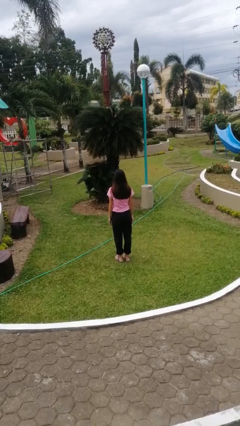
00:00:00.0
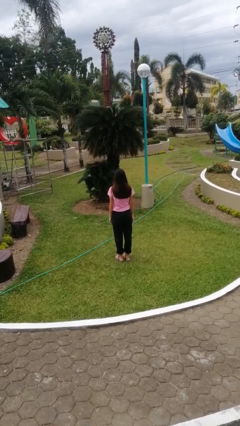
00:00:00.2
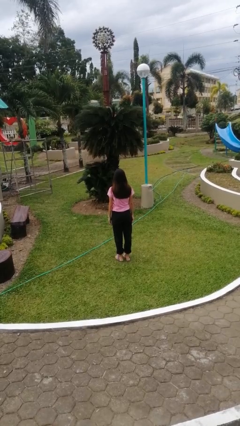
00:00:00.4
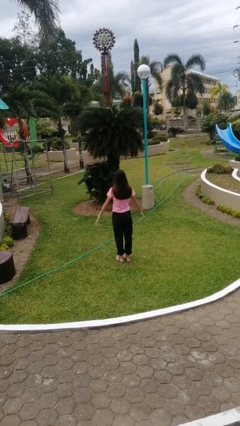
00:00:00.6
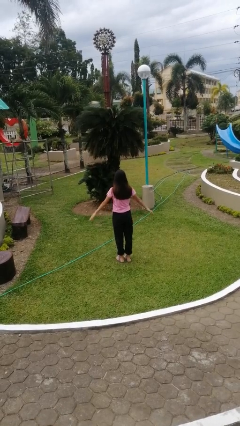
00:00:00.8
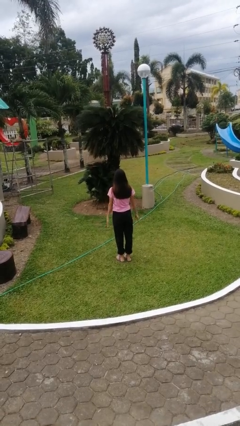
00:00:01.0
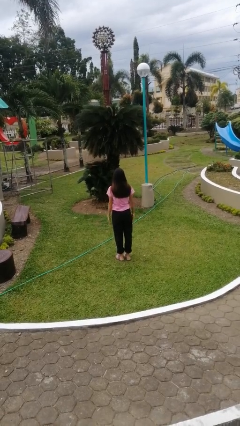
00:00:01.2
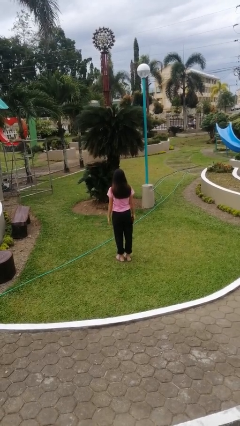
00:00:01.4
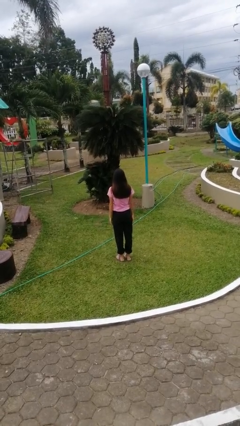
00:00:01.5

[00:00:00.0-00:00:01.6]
person slaps hands on thighs

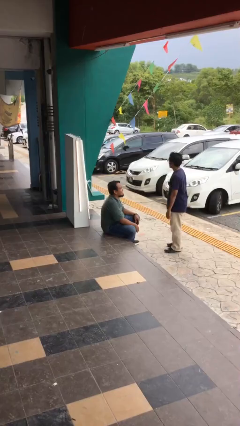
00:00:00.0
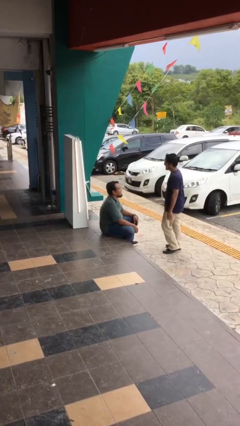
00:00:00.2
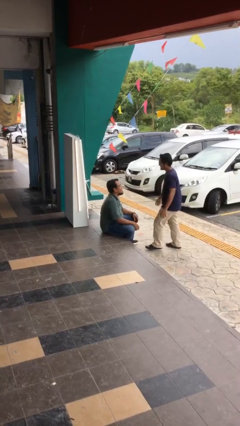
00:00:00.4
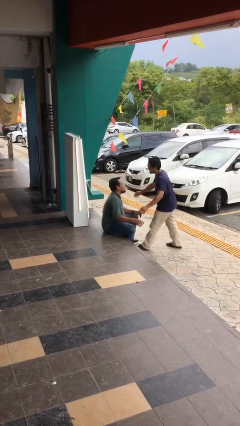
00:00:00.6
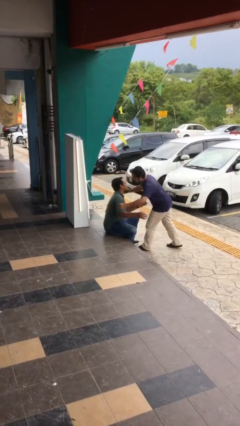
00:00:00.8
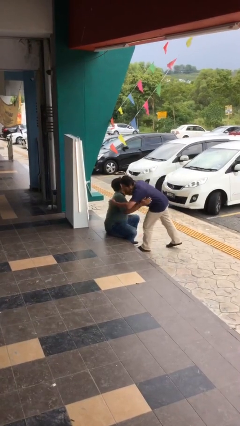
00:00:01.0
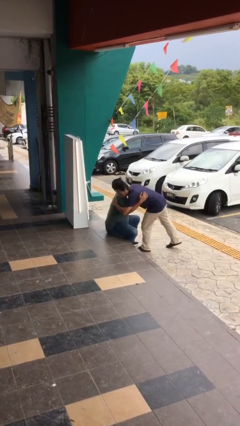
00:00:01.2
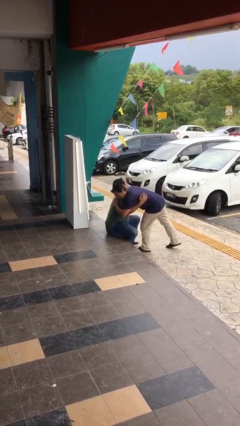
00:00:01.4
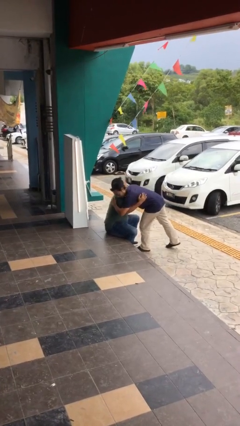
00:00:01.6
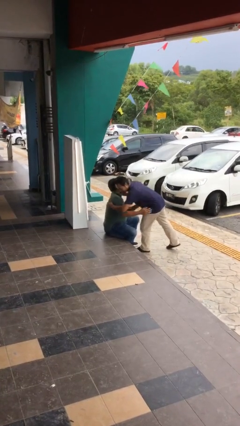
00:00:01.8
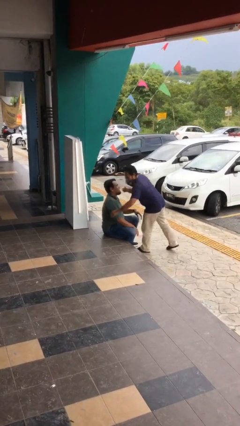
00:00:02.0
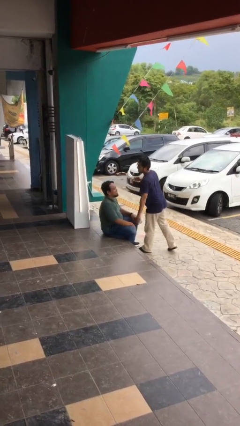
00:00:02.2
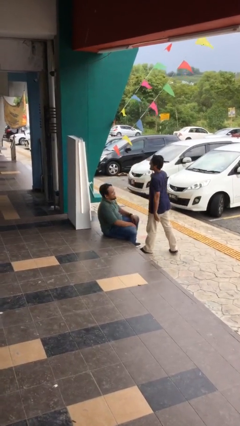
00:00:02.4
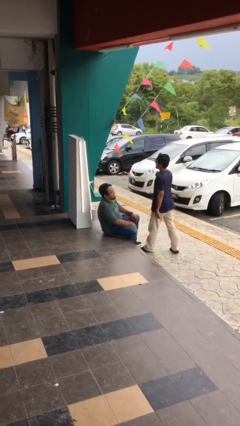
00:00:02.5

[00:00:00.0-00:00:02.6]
person embraces person

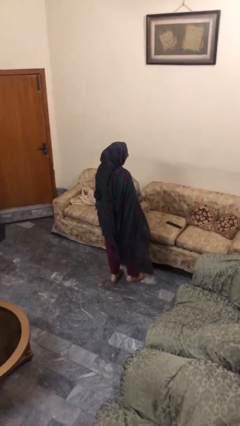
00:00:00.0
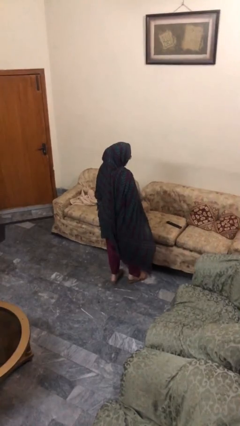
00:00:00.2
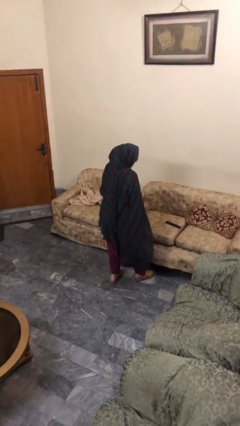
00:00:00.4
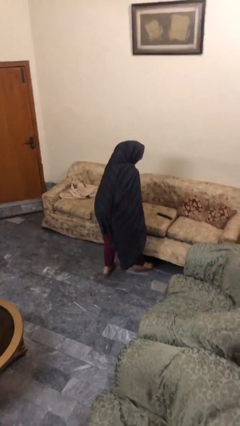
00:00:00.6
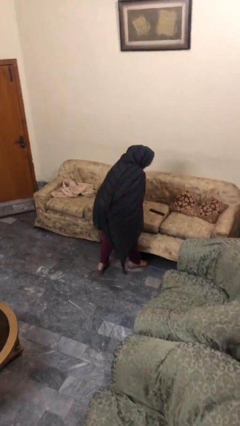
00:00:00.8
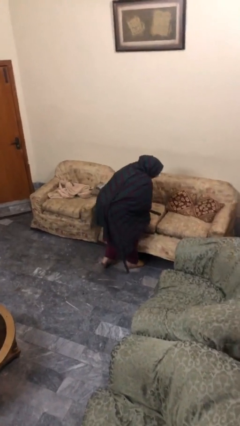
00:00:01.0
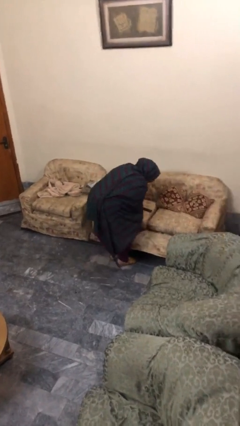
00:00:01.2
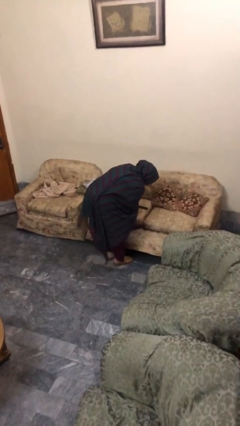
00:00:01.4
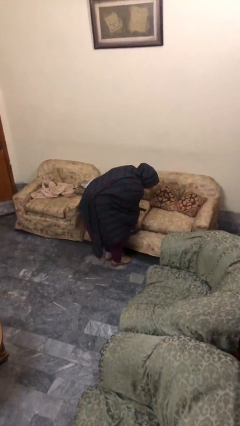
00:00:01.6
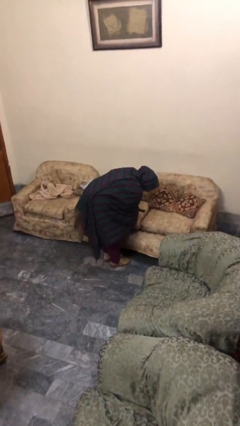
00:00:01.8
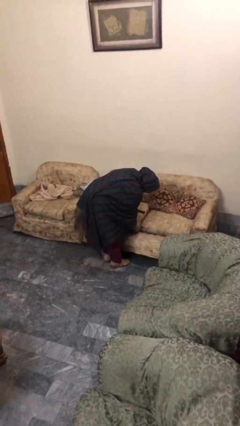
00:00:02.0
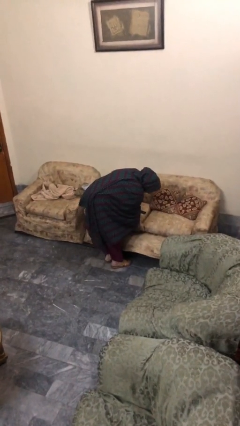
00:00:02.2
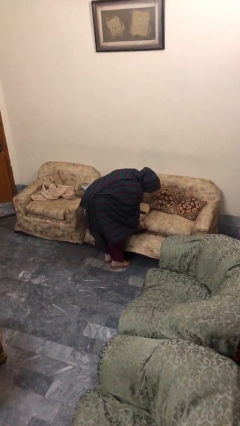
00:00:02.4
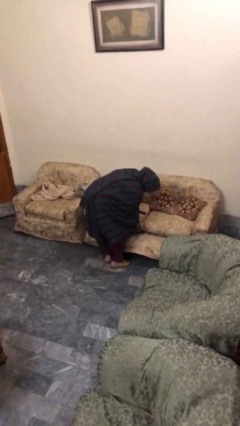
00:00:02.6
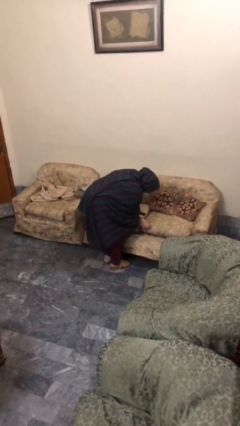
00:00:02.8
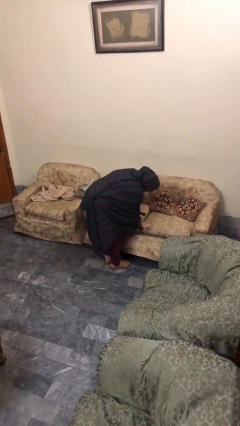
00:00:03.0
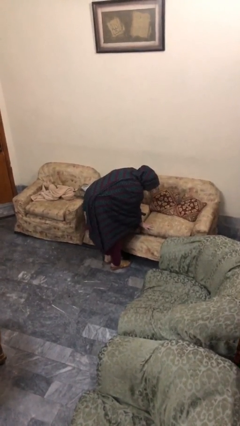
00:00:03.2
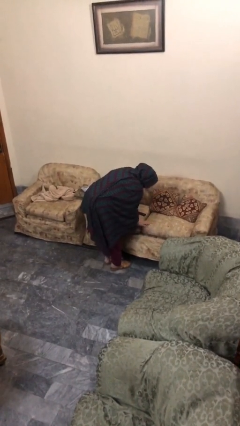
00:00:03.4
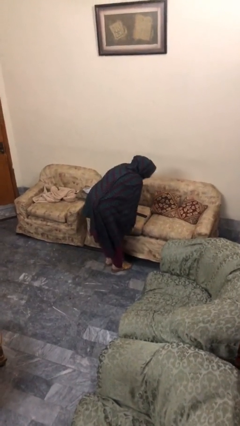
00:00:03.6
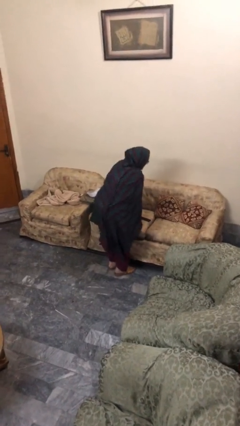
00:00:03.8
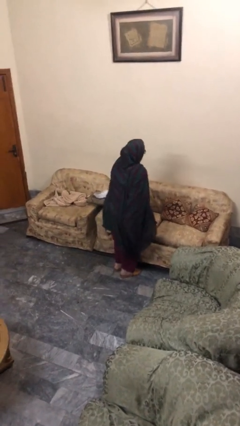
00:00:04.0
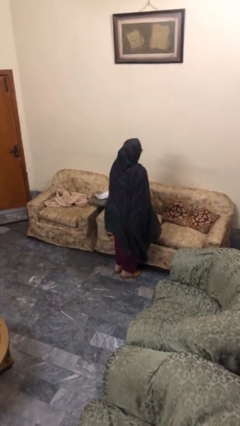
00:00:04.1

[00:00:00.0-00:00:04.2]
person searches in couch

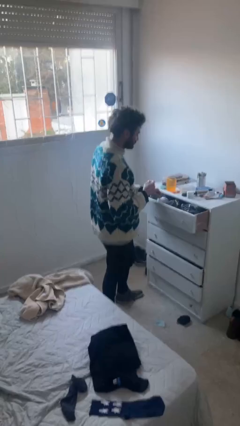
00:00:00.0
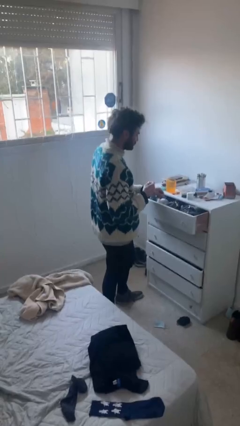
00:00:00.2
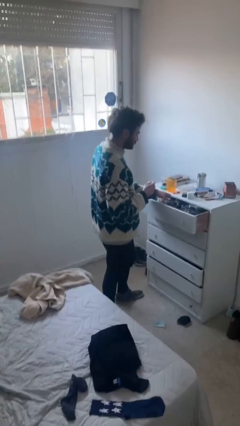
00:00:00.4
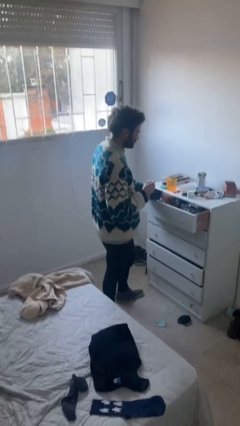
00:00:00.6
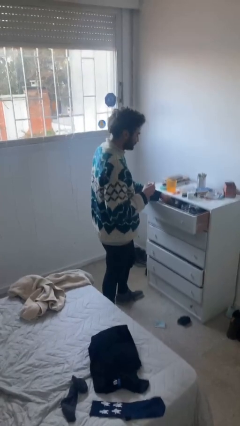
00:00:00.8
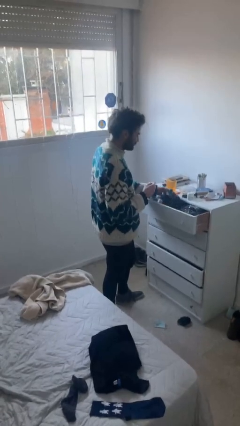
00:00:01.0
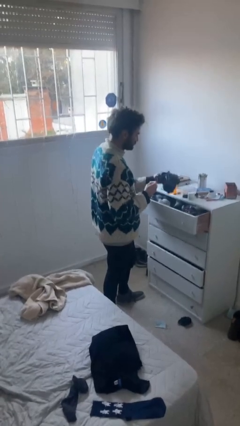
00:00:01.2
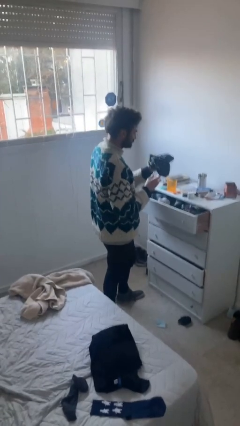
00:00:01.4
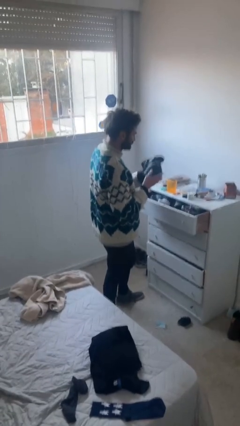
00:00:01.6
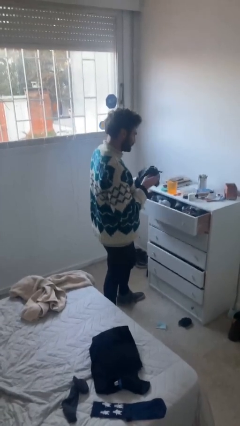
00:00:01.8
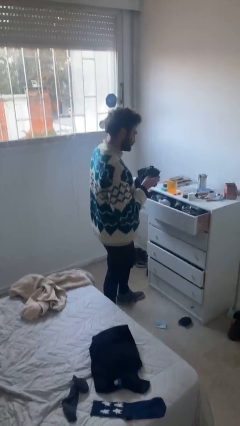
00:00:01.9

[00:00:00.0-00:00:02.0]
person takes clothes from dresser

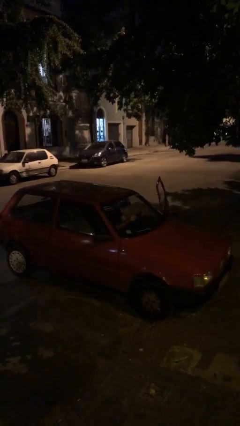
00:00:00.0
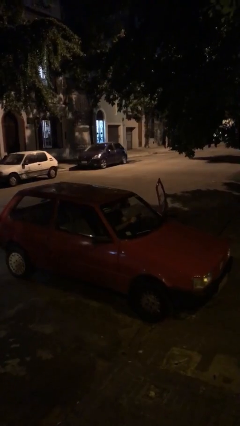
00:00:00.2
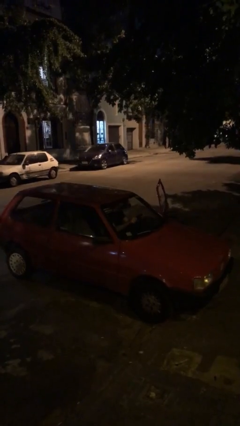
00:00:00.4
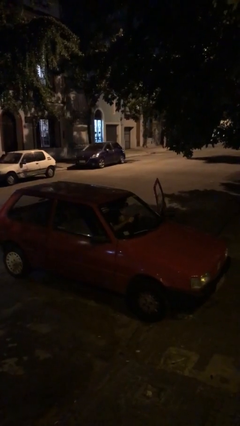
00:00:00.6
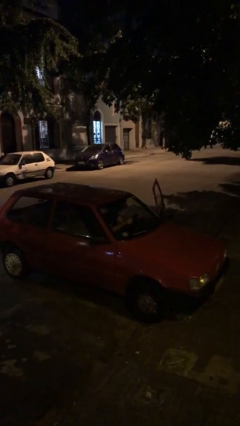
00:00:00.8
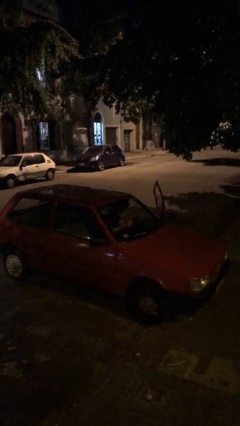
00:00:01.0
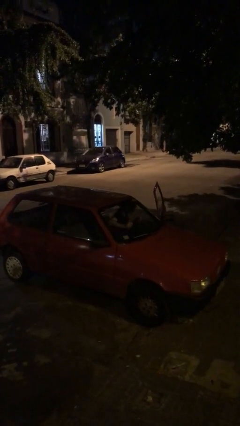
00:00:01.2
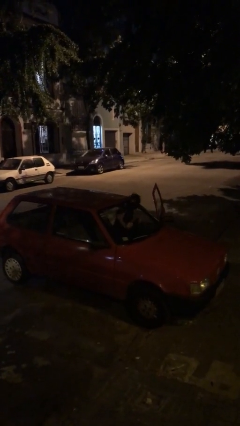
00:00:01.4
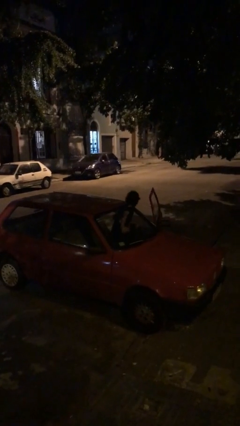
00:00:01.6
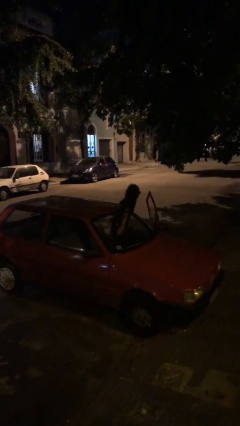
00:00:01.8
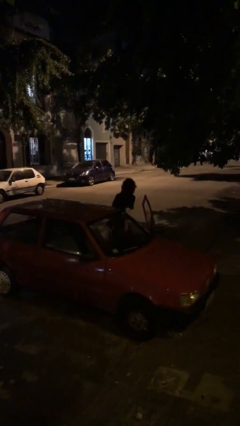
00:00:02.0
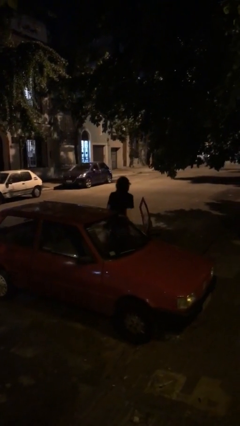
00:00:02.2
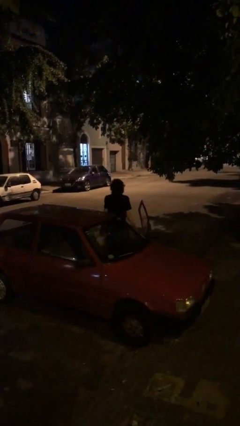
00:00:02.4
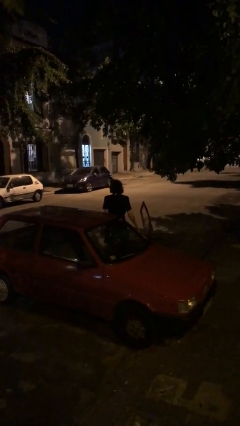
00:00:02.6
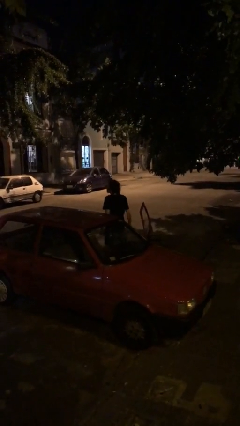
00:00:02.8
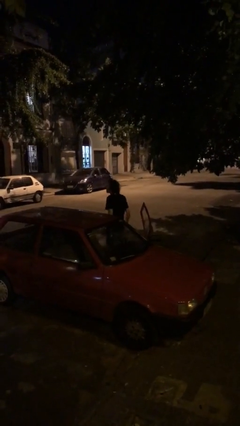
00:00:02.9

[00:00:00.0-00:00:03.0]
person exits car

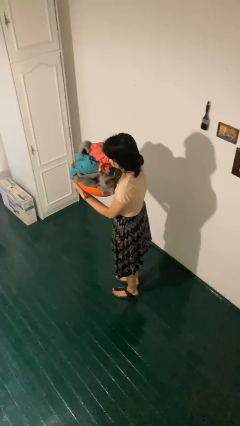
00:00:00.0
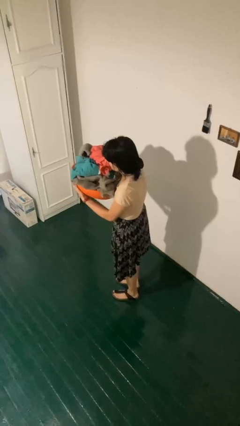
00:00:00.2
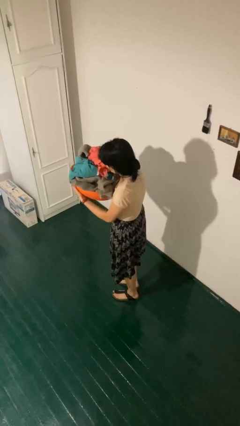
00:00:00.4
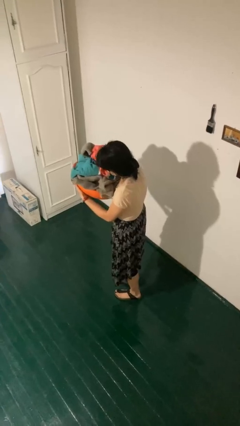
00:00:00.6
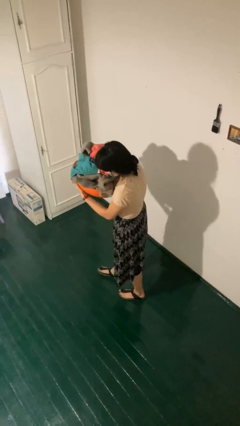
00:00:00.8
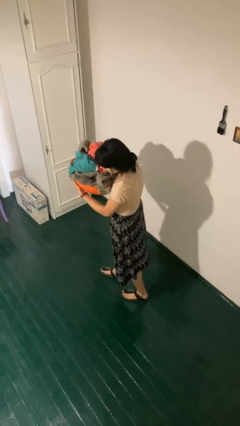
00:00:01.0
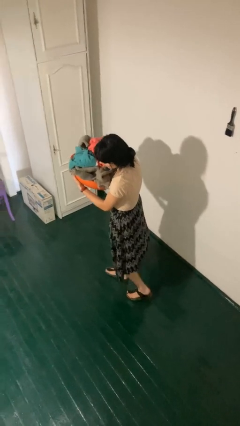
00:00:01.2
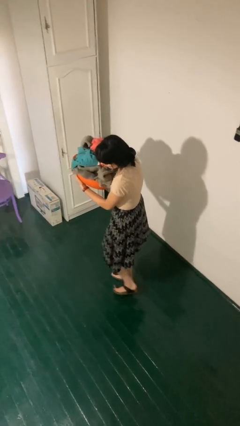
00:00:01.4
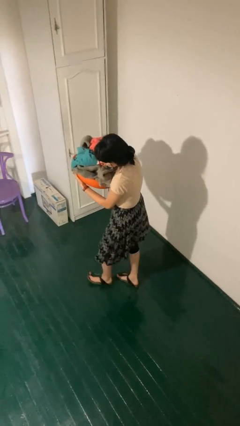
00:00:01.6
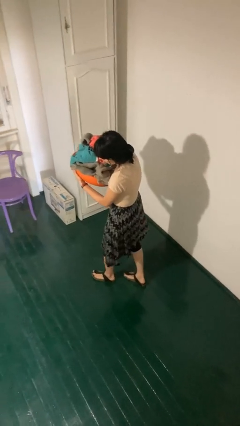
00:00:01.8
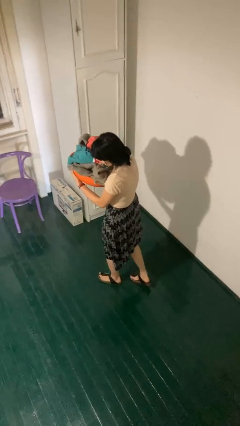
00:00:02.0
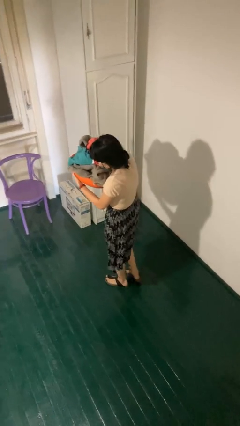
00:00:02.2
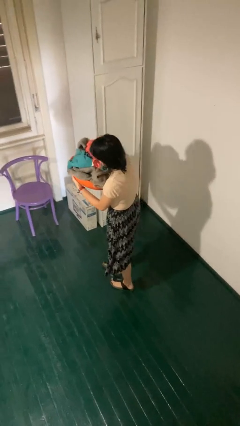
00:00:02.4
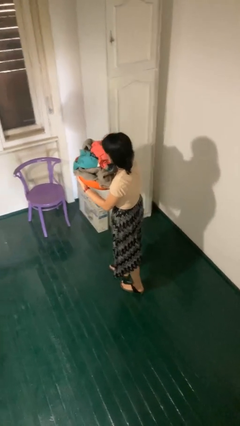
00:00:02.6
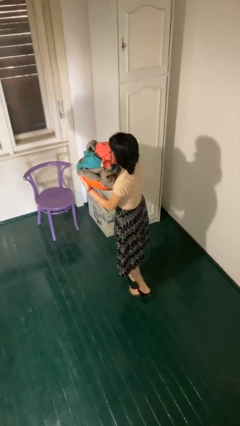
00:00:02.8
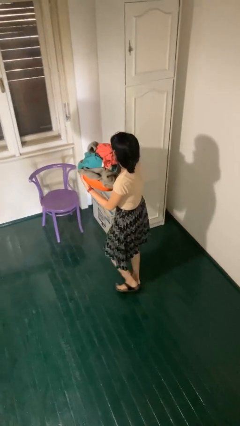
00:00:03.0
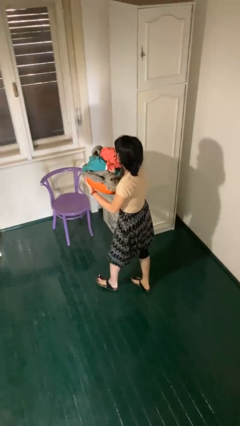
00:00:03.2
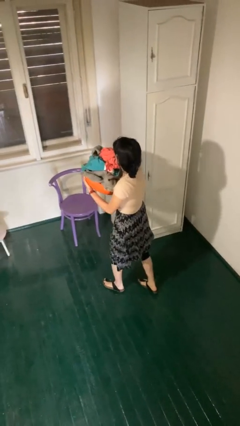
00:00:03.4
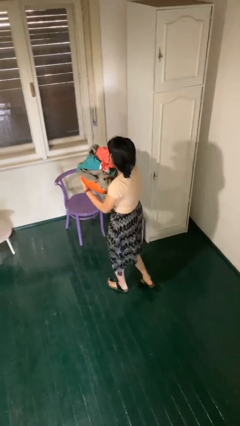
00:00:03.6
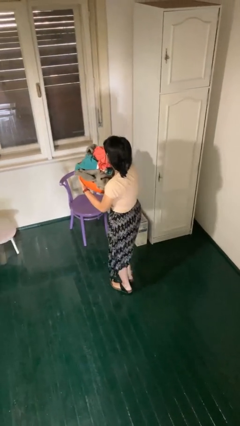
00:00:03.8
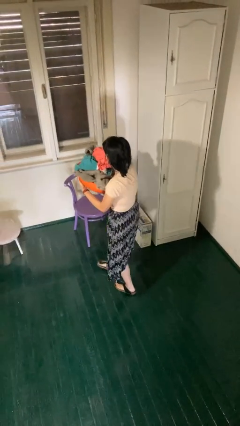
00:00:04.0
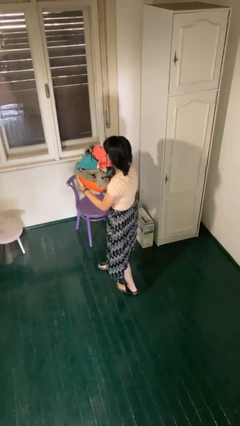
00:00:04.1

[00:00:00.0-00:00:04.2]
person carries laundry basket
